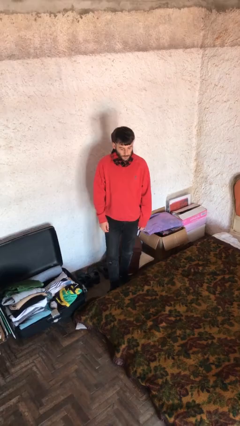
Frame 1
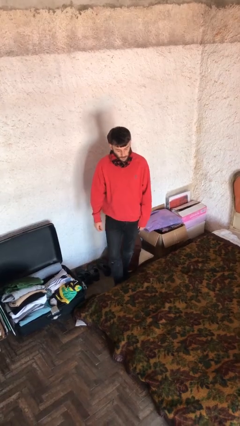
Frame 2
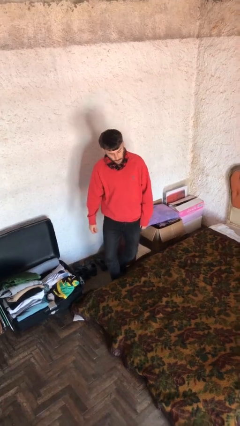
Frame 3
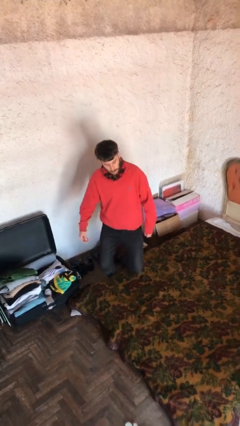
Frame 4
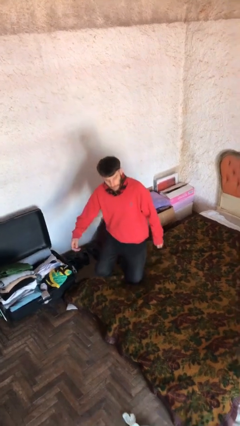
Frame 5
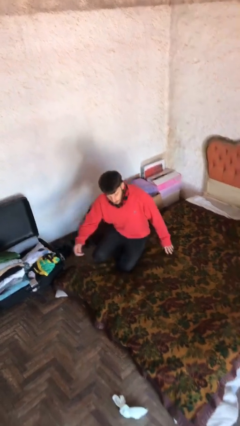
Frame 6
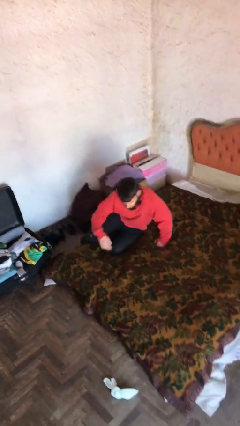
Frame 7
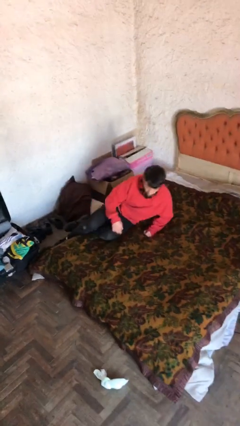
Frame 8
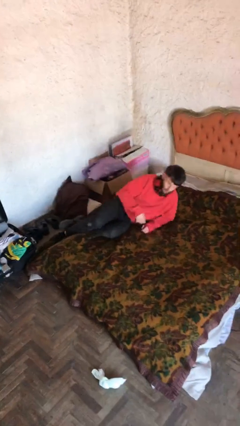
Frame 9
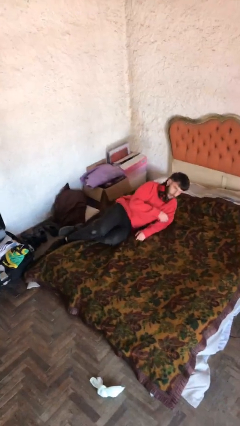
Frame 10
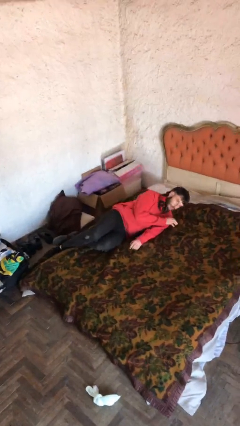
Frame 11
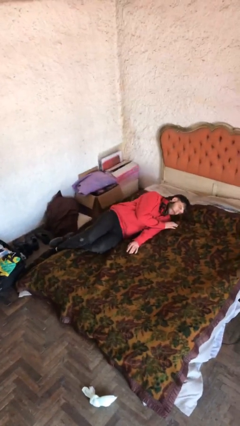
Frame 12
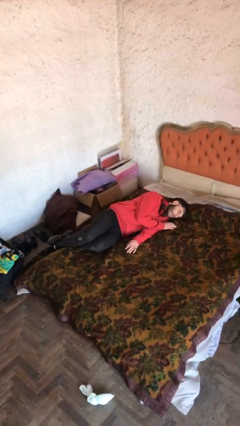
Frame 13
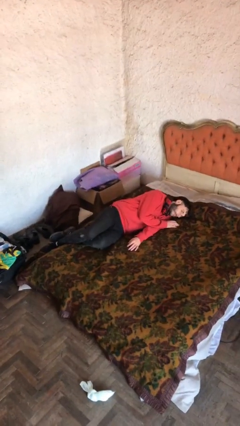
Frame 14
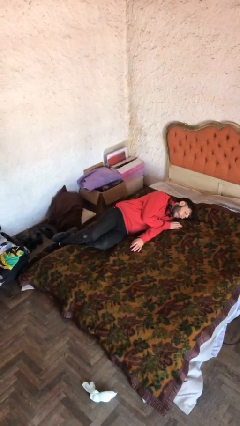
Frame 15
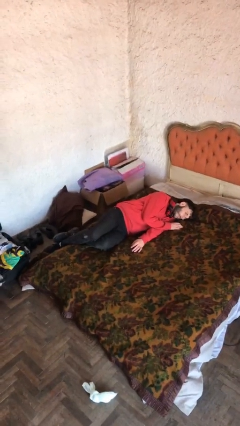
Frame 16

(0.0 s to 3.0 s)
person lies down on bed

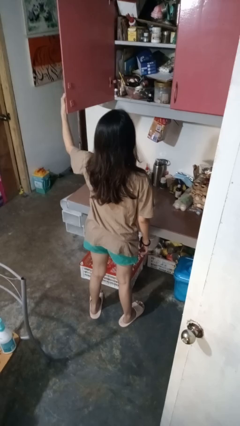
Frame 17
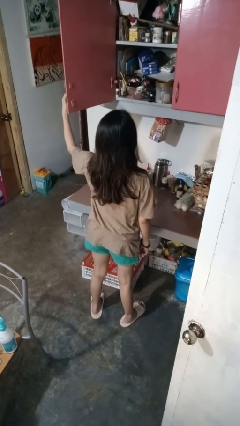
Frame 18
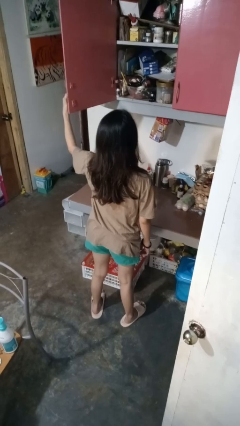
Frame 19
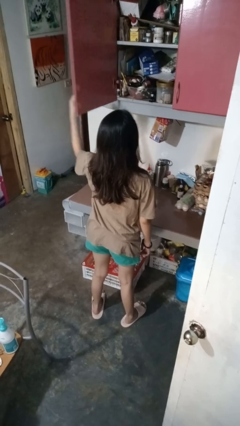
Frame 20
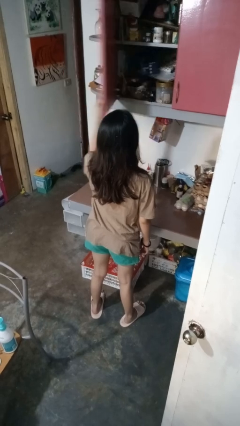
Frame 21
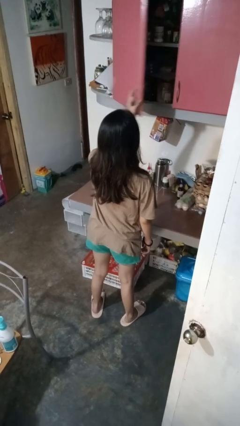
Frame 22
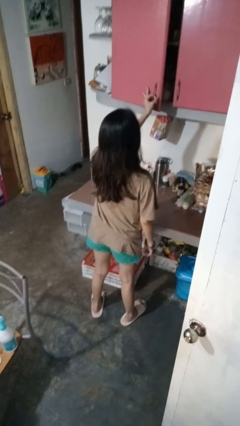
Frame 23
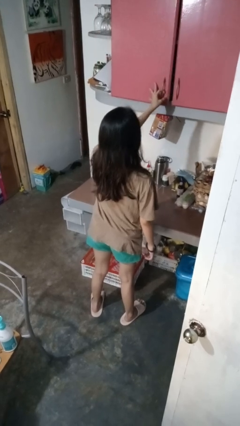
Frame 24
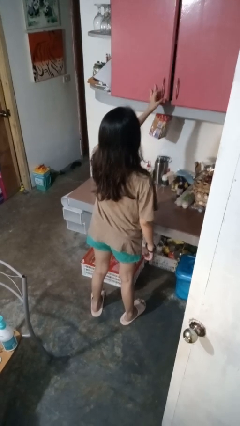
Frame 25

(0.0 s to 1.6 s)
person closes cabinet

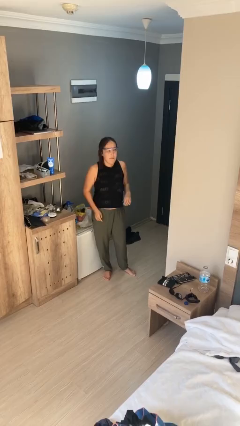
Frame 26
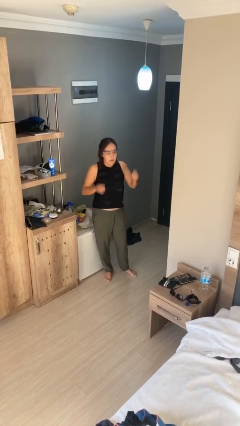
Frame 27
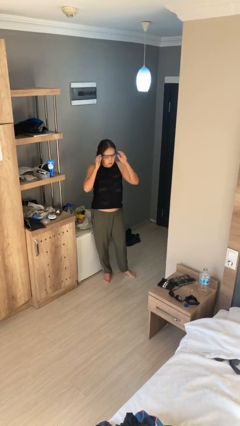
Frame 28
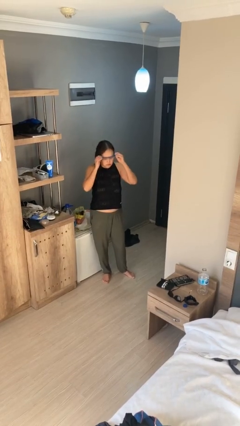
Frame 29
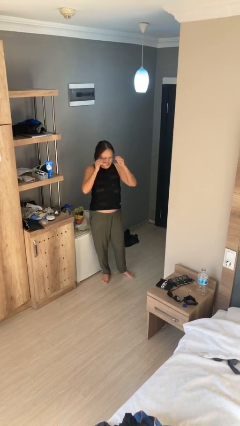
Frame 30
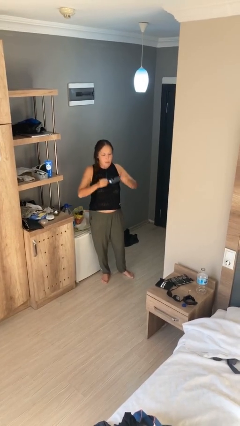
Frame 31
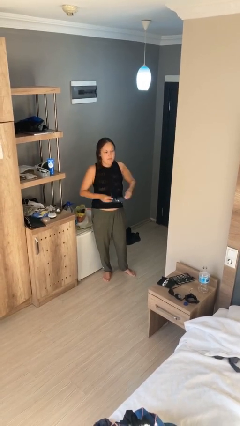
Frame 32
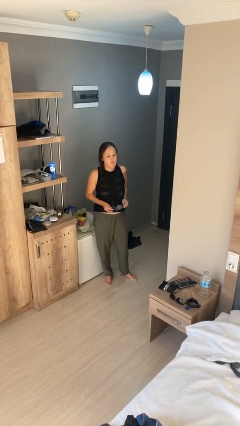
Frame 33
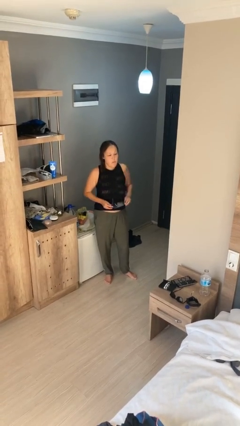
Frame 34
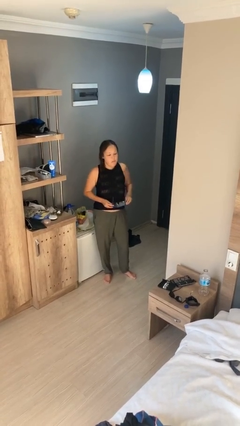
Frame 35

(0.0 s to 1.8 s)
person takes off glasses

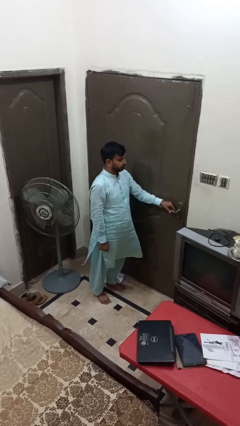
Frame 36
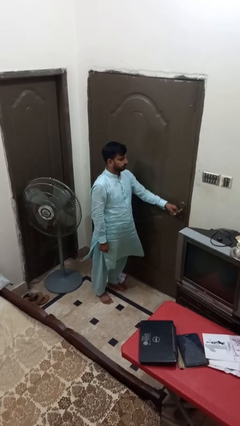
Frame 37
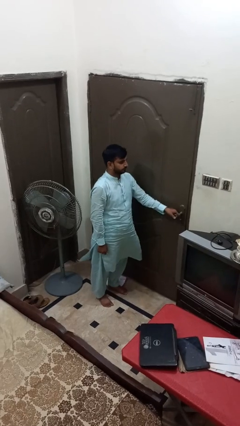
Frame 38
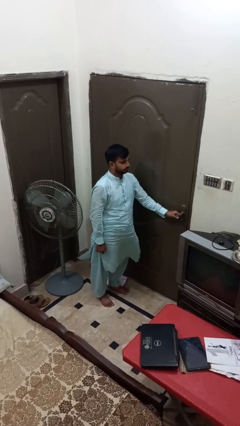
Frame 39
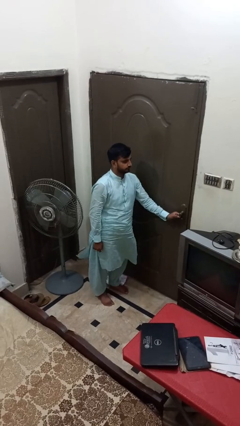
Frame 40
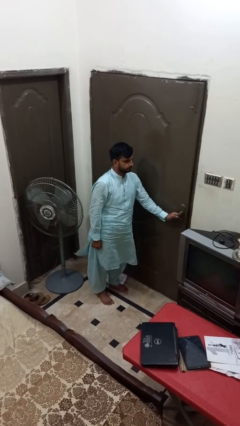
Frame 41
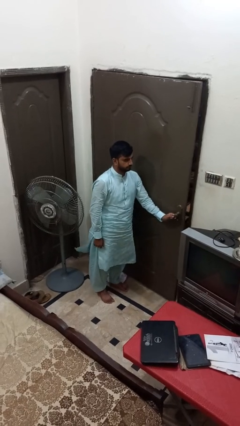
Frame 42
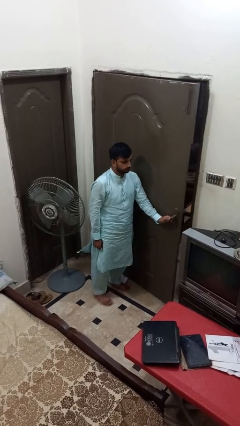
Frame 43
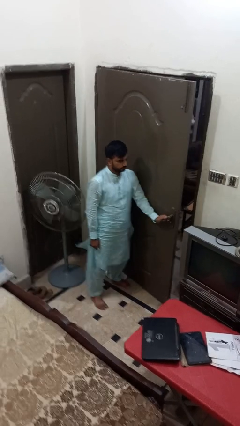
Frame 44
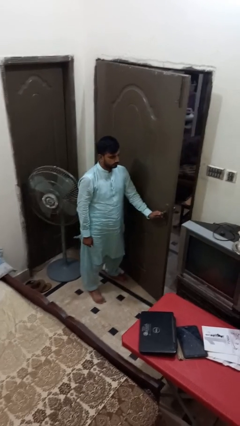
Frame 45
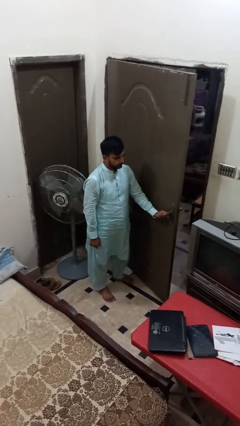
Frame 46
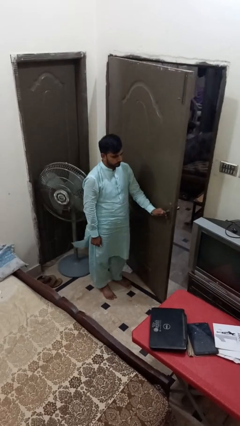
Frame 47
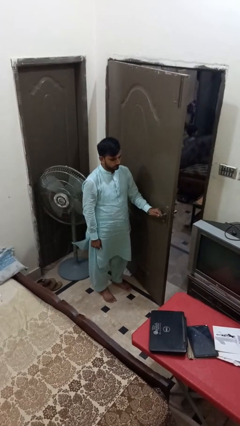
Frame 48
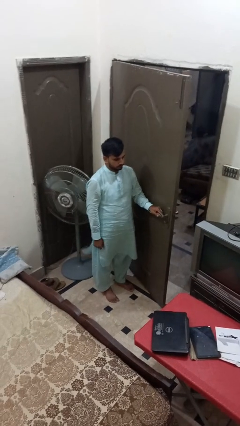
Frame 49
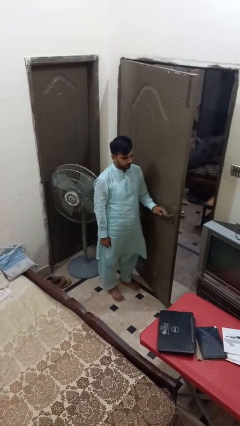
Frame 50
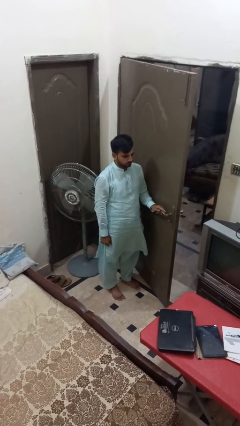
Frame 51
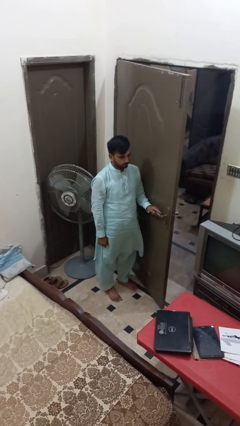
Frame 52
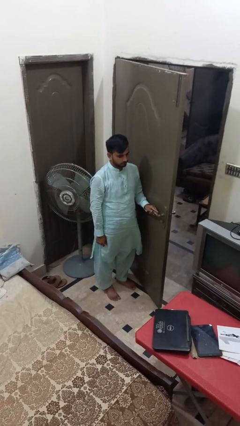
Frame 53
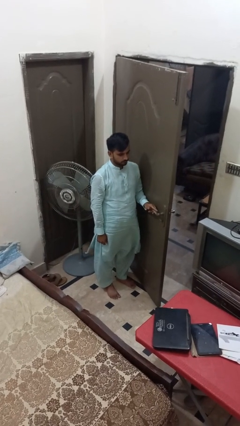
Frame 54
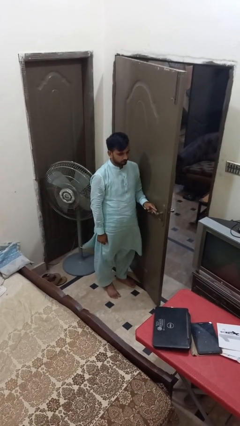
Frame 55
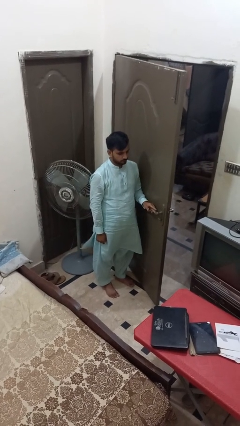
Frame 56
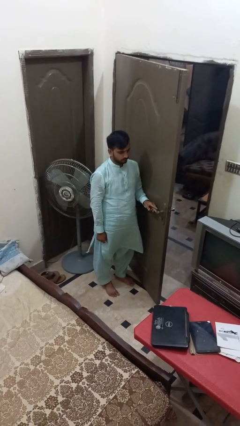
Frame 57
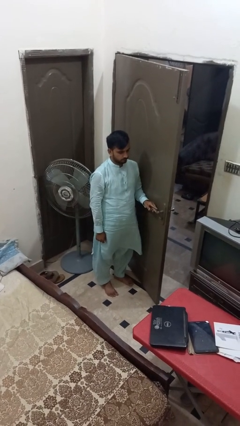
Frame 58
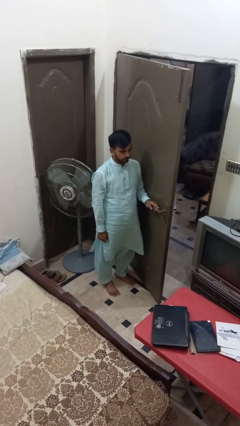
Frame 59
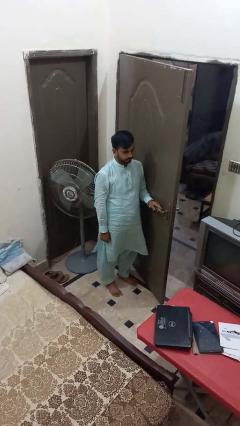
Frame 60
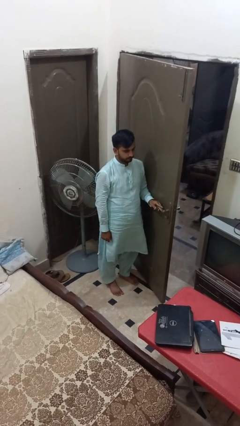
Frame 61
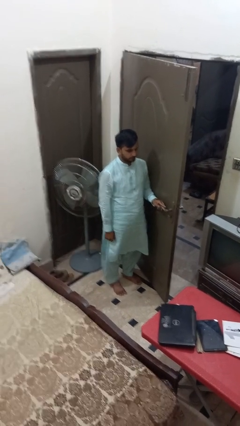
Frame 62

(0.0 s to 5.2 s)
person opens facility door

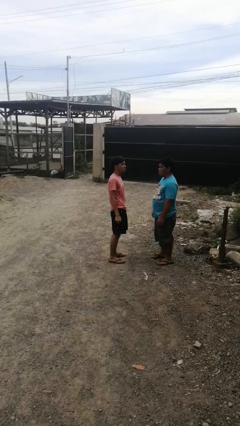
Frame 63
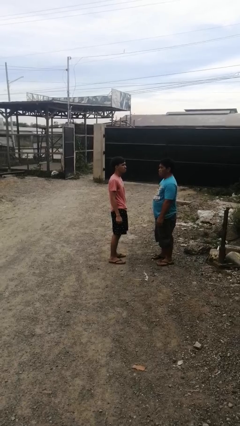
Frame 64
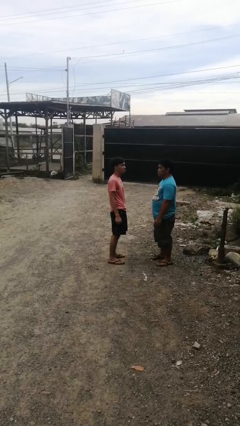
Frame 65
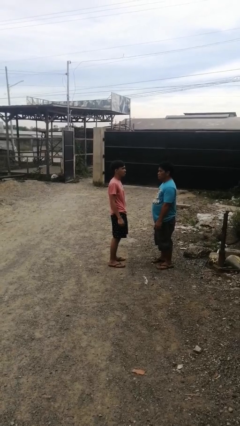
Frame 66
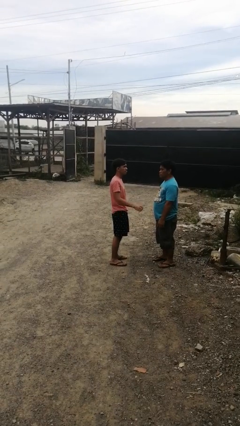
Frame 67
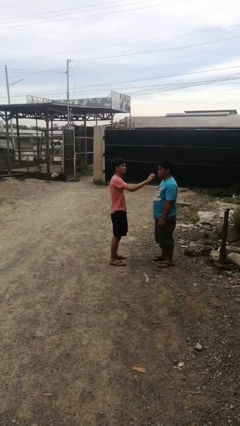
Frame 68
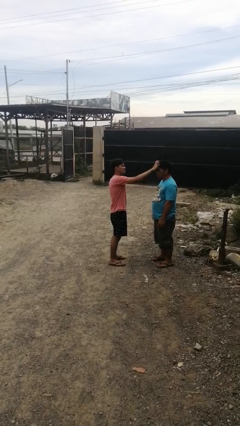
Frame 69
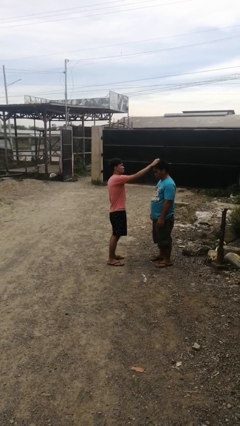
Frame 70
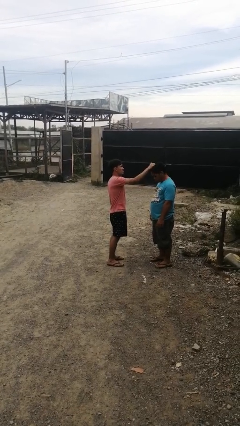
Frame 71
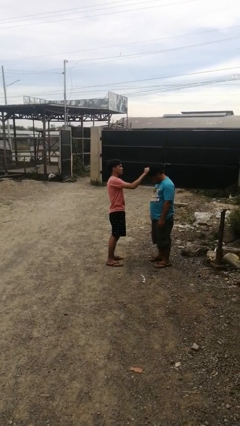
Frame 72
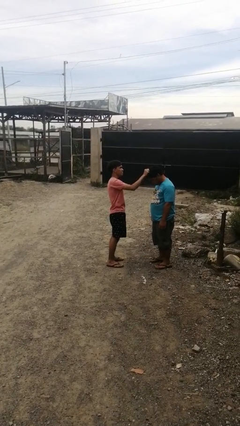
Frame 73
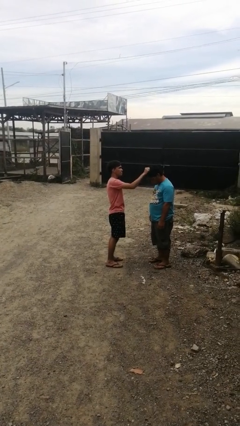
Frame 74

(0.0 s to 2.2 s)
person grabs person by hair

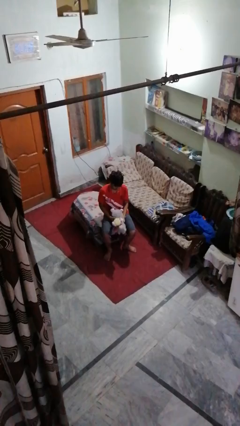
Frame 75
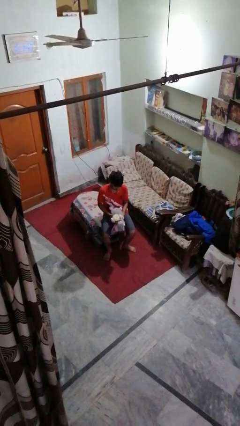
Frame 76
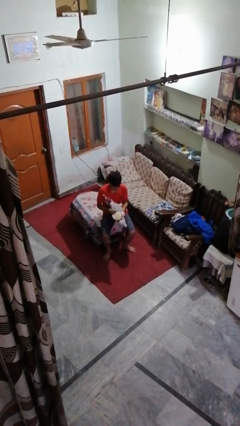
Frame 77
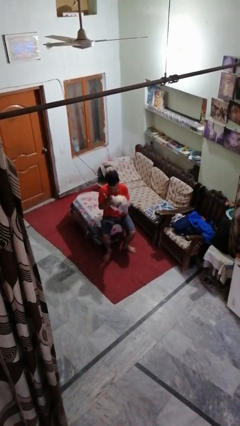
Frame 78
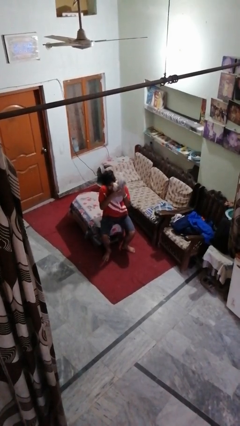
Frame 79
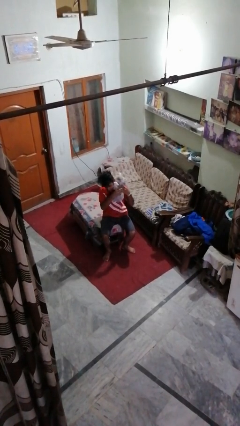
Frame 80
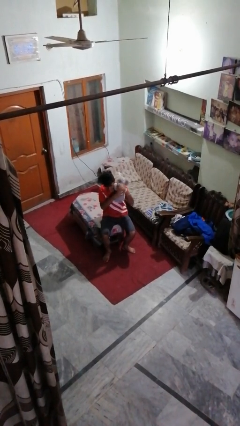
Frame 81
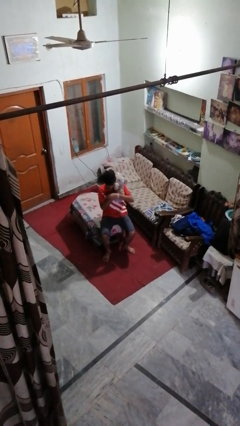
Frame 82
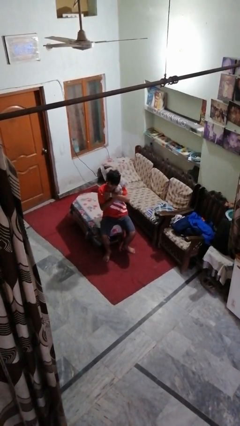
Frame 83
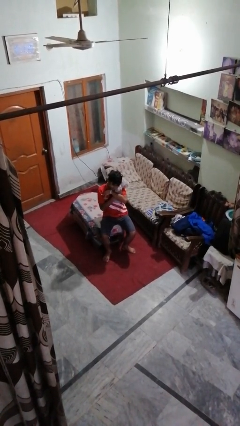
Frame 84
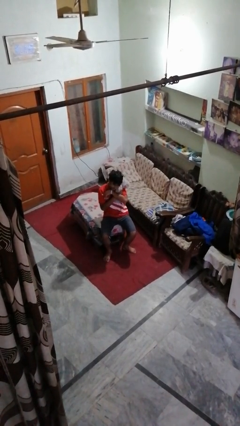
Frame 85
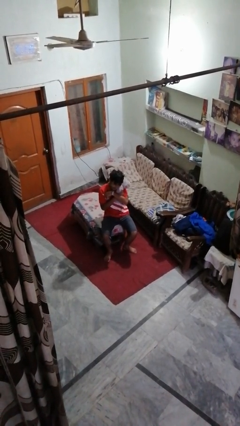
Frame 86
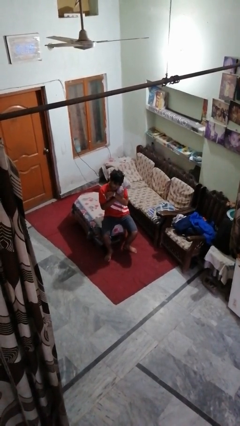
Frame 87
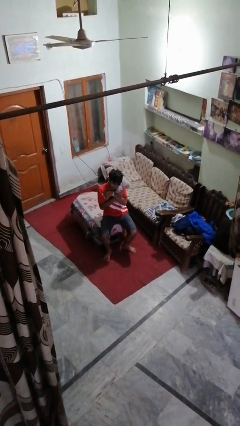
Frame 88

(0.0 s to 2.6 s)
person hugs stuffed animal

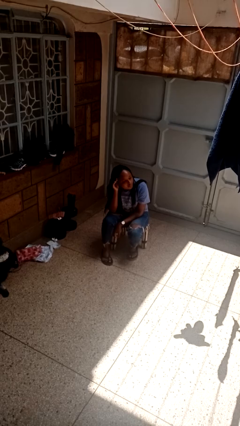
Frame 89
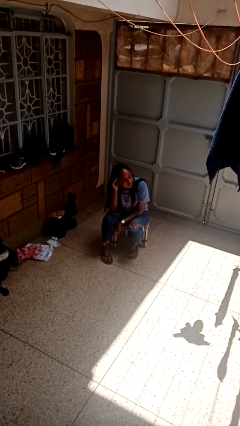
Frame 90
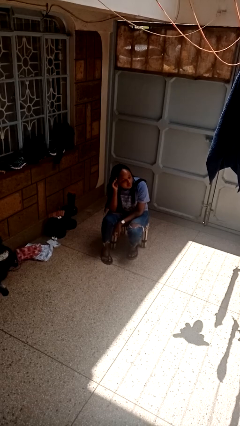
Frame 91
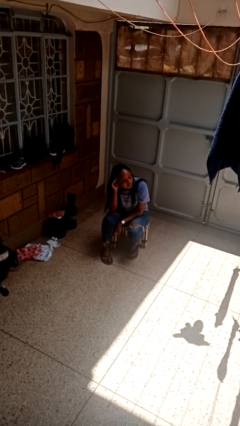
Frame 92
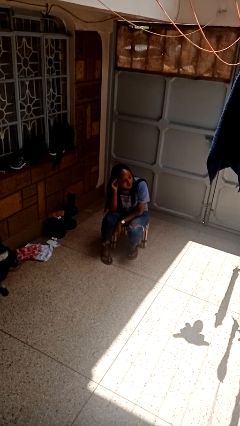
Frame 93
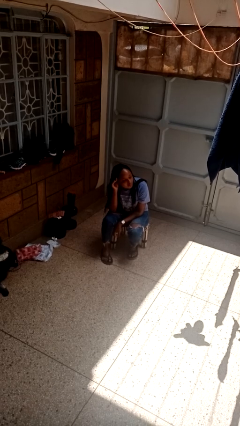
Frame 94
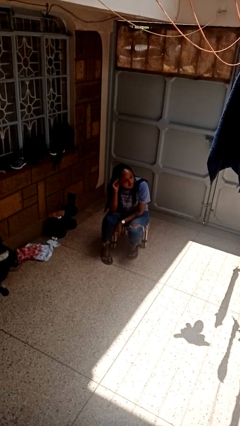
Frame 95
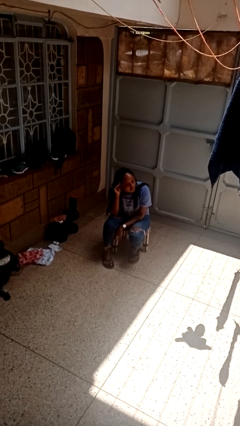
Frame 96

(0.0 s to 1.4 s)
person gestures listen closely
